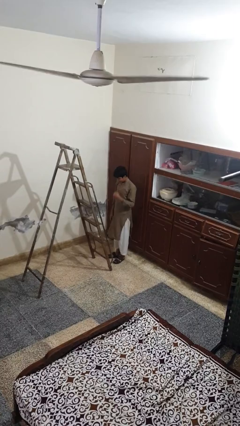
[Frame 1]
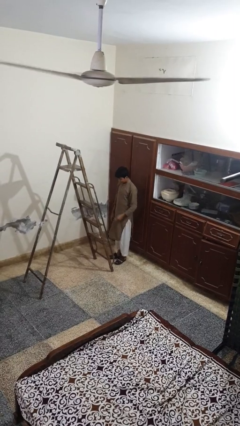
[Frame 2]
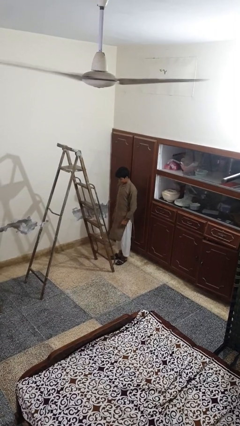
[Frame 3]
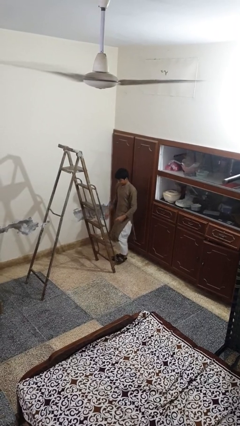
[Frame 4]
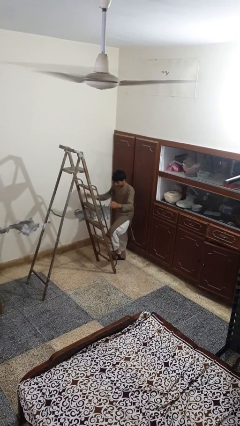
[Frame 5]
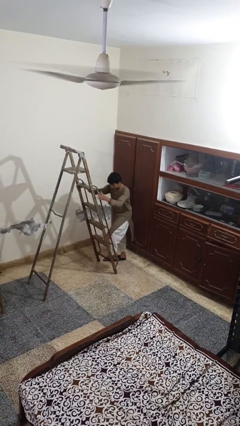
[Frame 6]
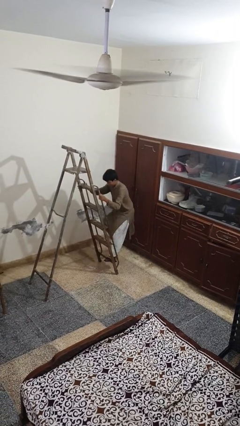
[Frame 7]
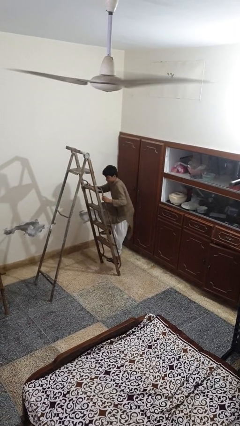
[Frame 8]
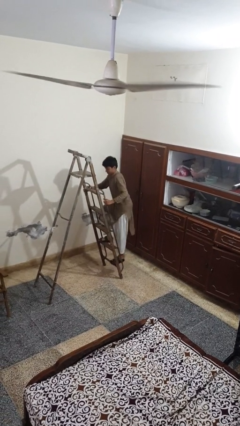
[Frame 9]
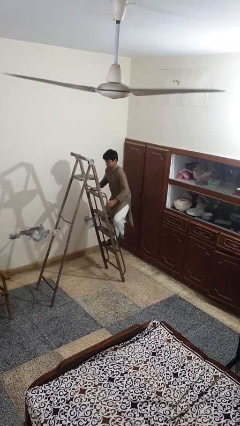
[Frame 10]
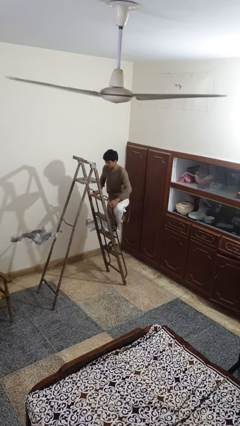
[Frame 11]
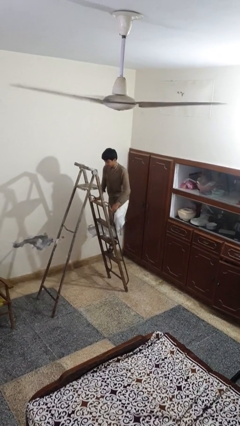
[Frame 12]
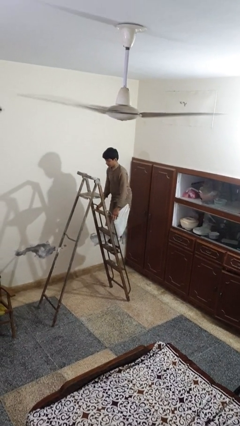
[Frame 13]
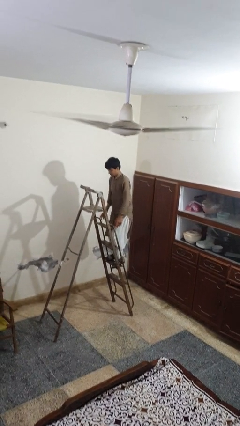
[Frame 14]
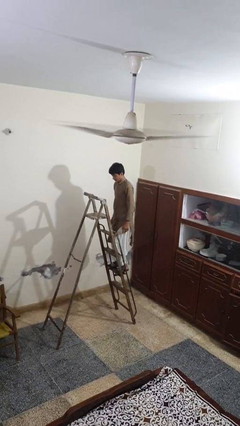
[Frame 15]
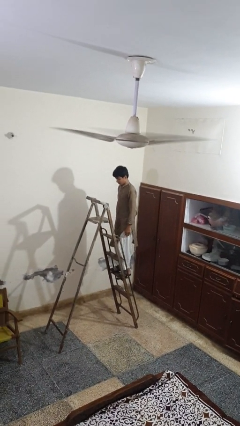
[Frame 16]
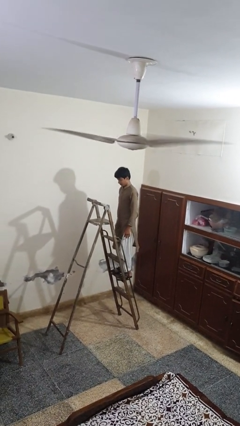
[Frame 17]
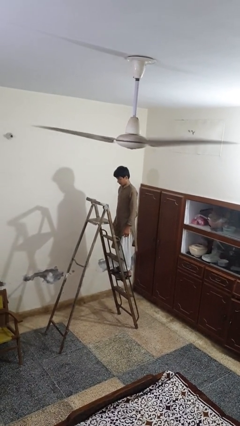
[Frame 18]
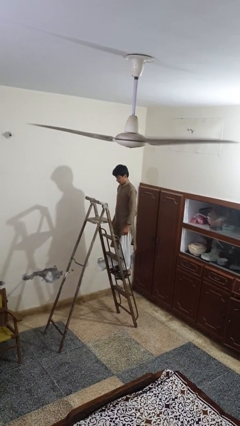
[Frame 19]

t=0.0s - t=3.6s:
person climbs up ladder

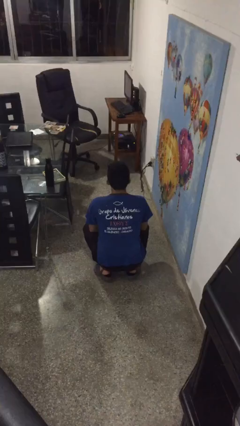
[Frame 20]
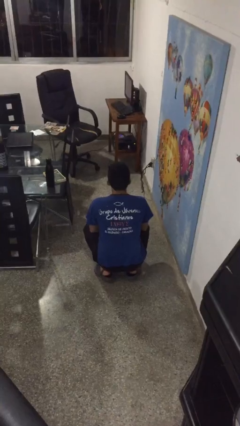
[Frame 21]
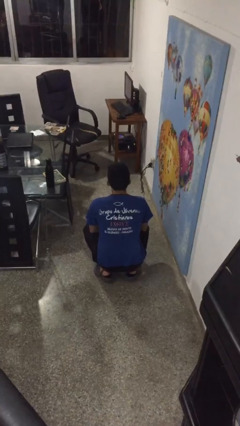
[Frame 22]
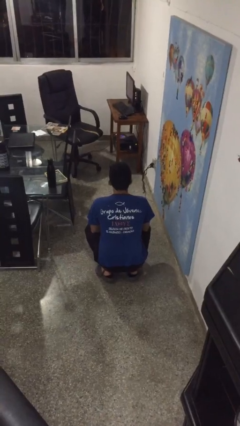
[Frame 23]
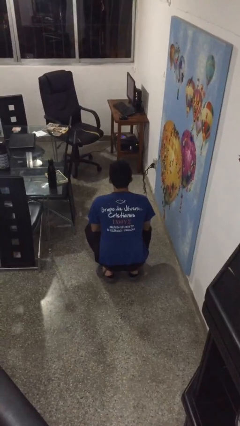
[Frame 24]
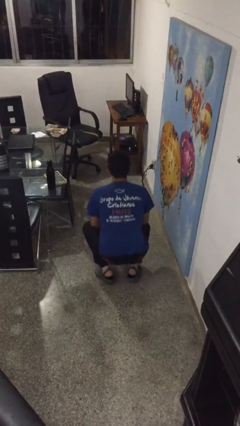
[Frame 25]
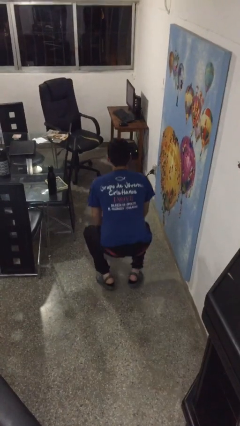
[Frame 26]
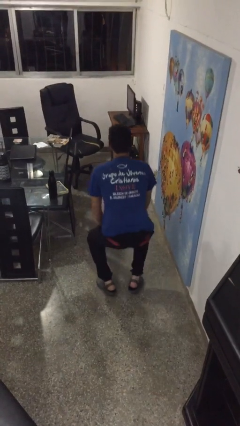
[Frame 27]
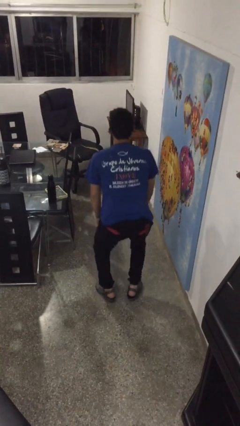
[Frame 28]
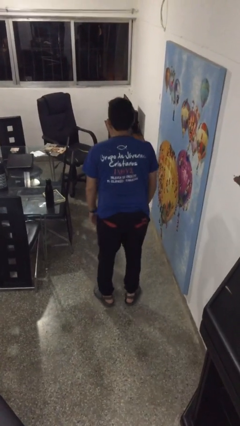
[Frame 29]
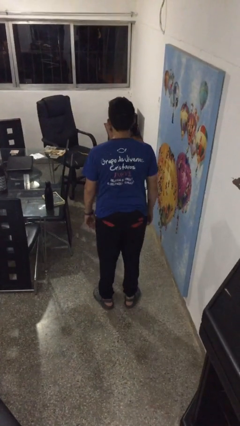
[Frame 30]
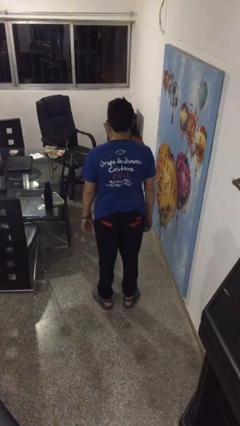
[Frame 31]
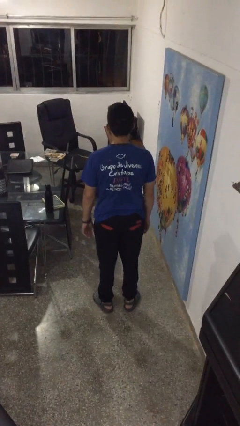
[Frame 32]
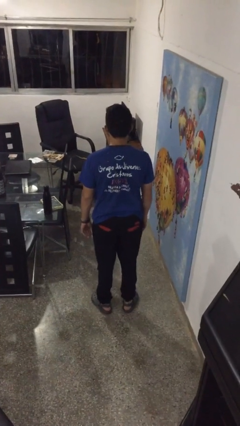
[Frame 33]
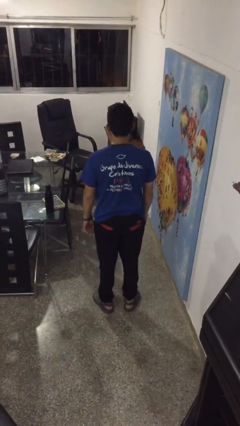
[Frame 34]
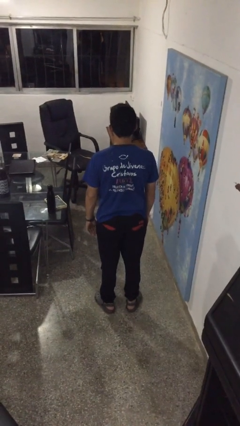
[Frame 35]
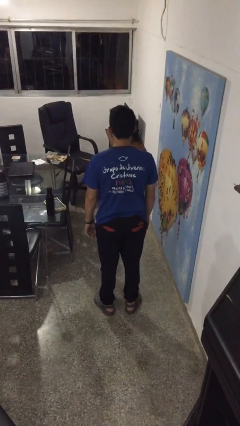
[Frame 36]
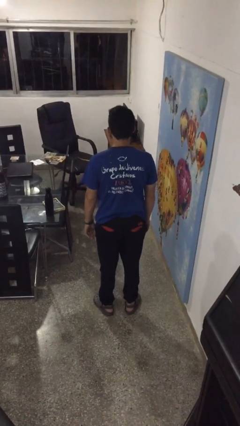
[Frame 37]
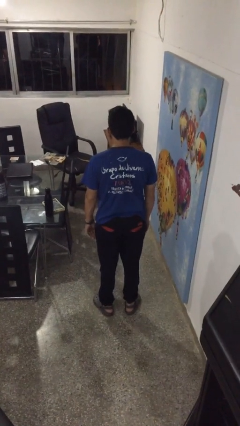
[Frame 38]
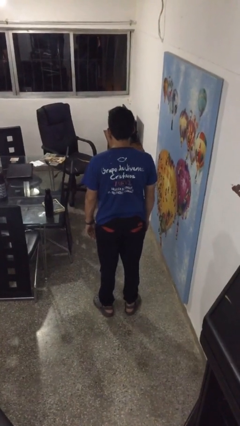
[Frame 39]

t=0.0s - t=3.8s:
person stands up

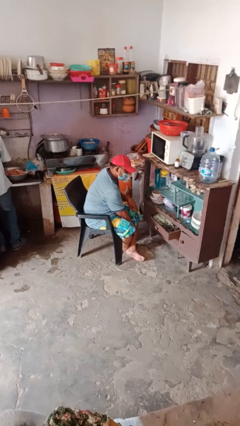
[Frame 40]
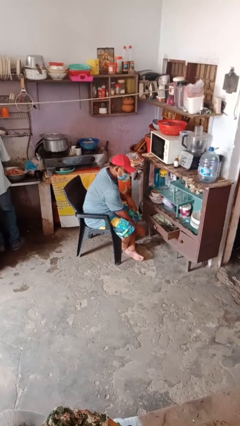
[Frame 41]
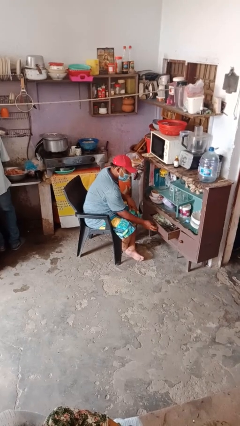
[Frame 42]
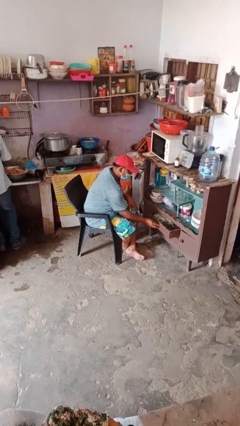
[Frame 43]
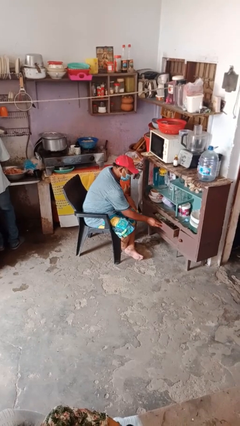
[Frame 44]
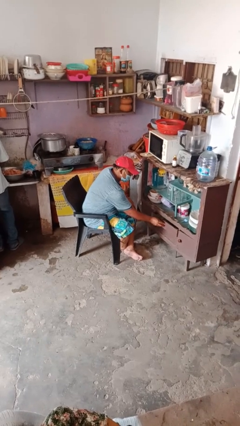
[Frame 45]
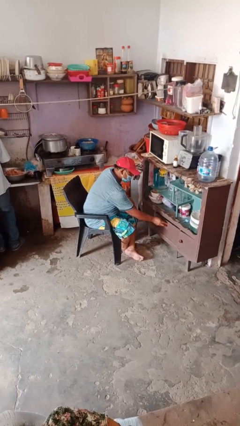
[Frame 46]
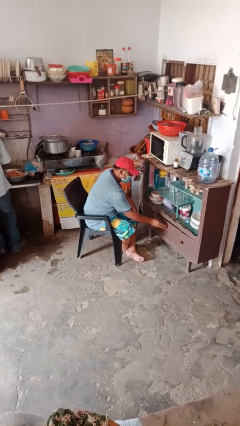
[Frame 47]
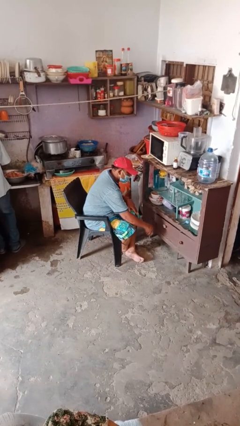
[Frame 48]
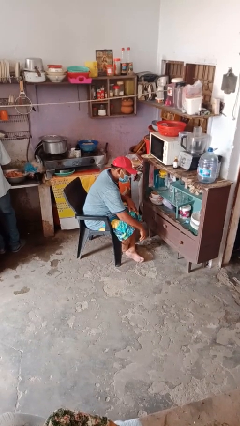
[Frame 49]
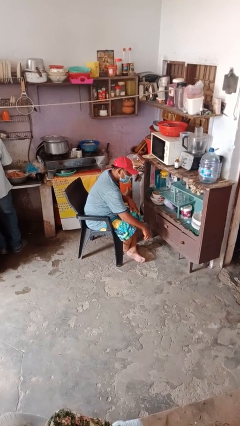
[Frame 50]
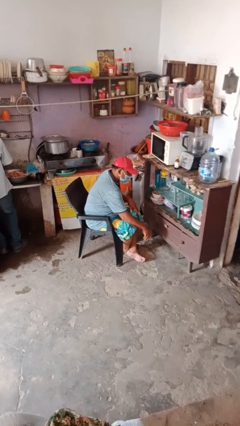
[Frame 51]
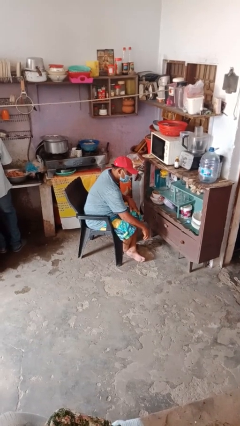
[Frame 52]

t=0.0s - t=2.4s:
person closes dresser drawer

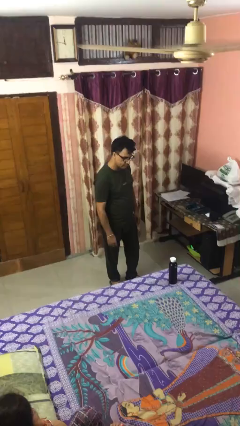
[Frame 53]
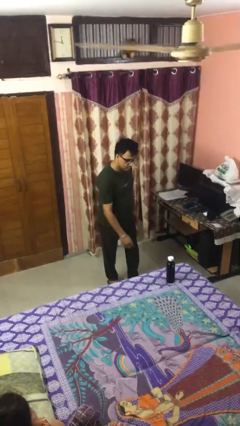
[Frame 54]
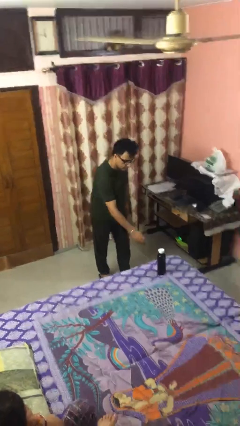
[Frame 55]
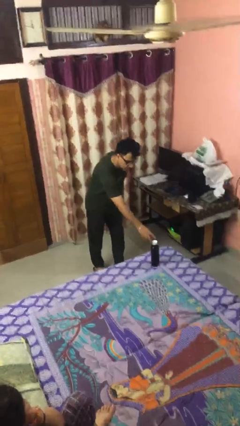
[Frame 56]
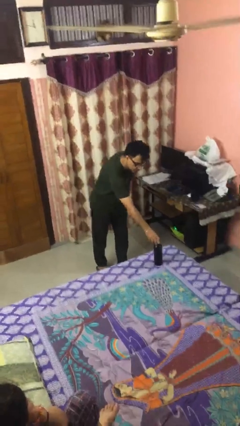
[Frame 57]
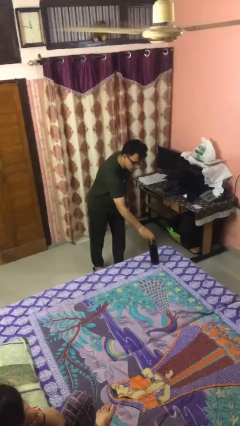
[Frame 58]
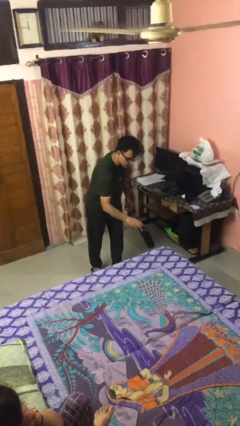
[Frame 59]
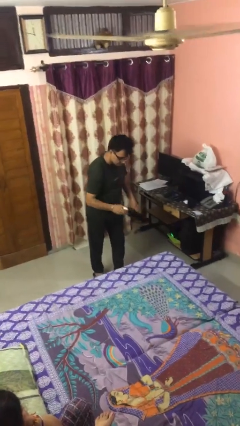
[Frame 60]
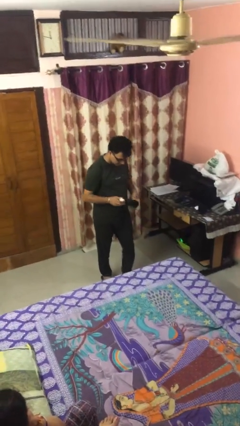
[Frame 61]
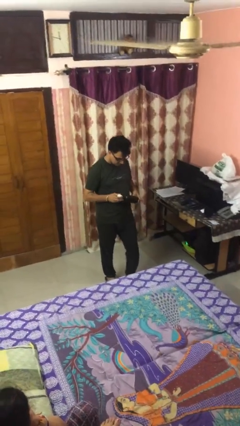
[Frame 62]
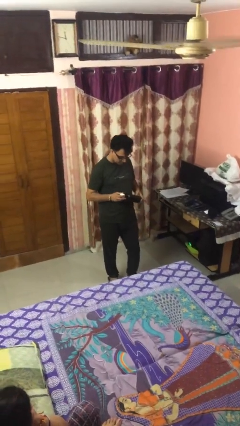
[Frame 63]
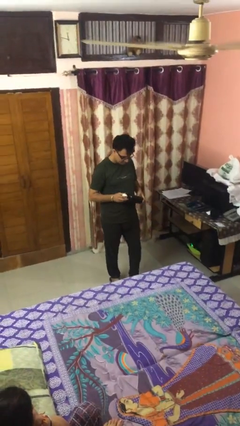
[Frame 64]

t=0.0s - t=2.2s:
person picks up object from bed

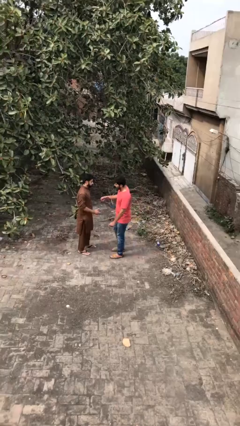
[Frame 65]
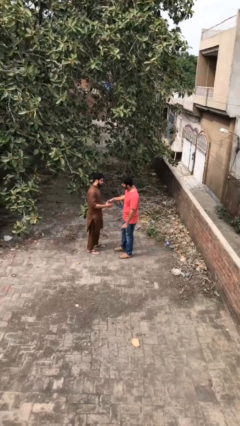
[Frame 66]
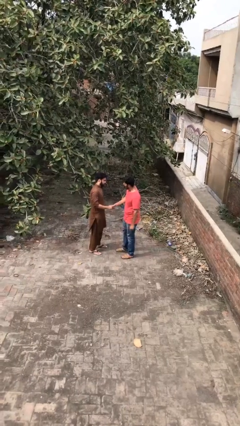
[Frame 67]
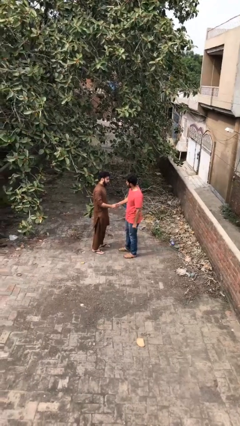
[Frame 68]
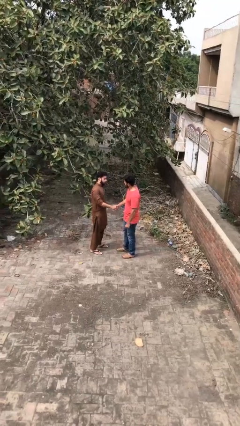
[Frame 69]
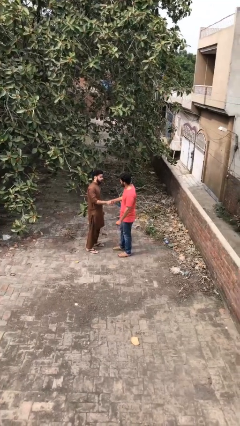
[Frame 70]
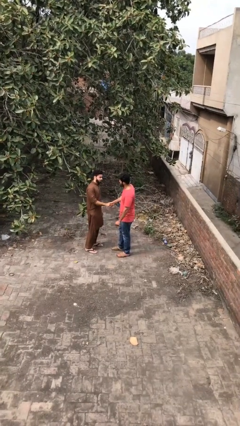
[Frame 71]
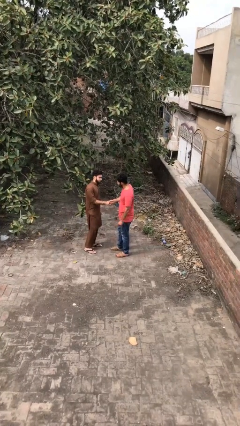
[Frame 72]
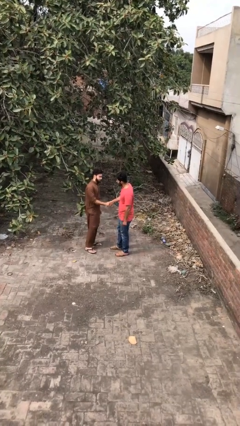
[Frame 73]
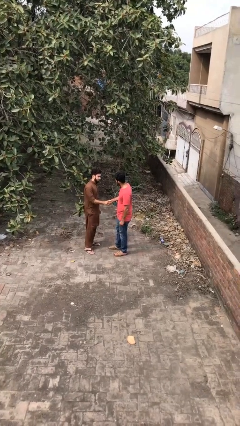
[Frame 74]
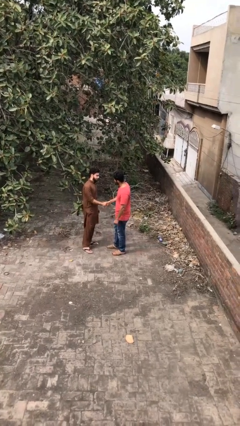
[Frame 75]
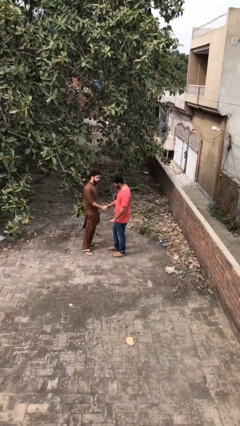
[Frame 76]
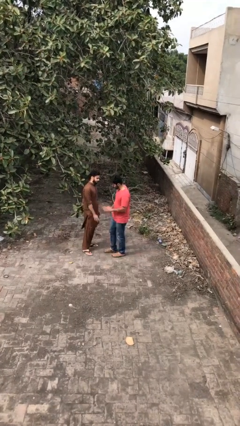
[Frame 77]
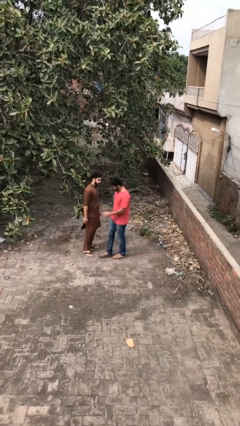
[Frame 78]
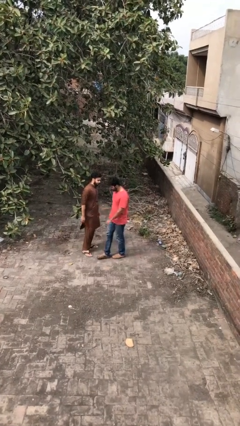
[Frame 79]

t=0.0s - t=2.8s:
person shakes hand

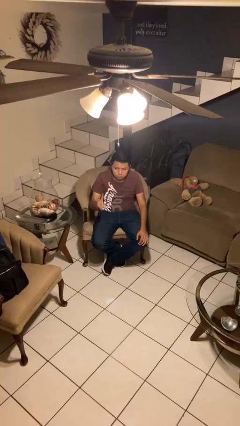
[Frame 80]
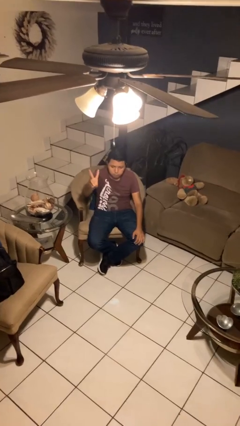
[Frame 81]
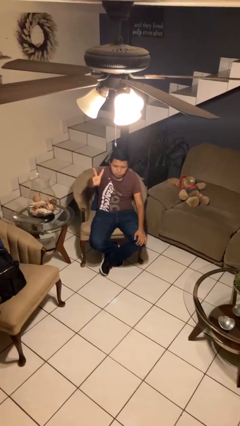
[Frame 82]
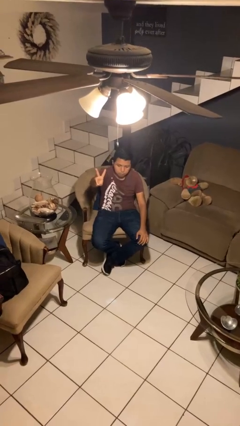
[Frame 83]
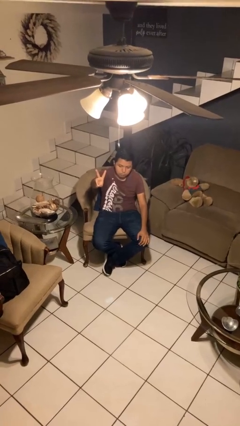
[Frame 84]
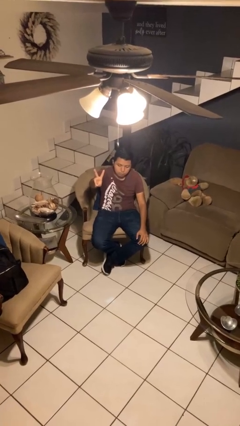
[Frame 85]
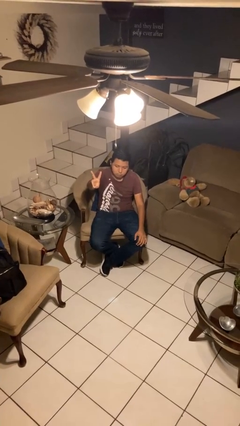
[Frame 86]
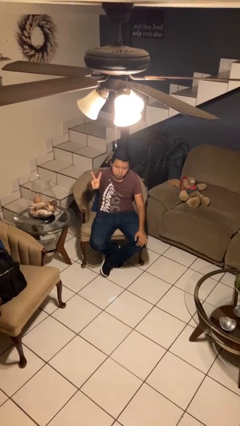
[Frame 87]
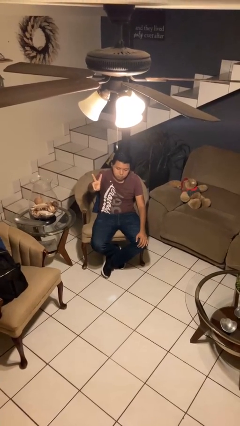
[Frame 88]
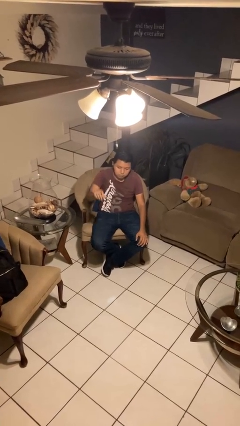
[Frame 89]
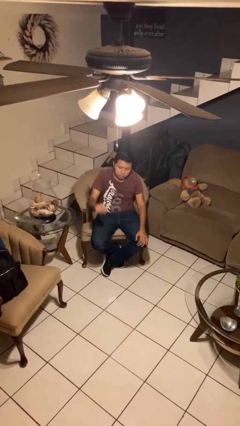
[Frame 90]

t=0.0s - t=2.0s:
person gestures peace

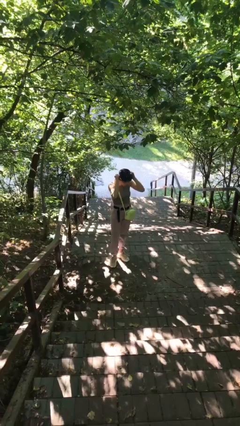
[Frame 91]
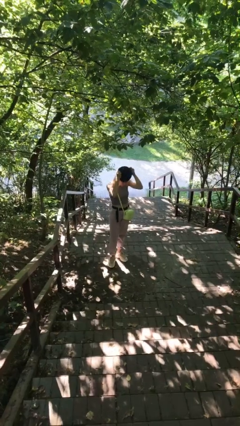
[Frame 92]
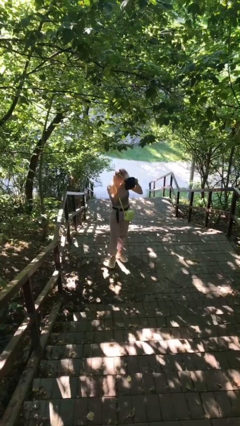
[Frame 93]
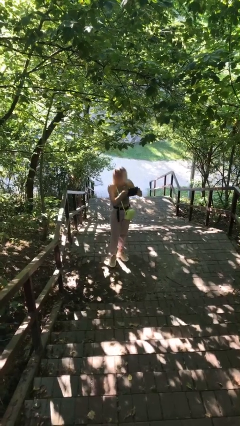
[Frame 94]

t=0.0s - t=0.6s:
person takes off hat
